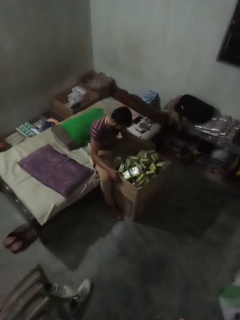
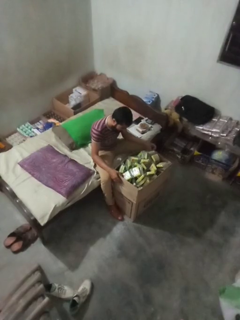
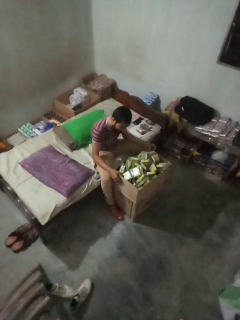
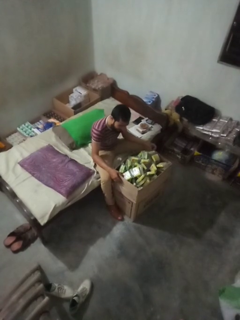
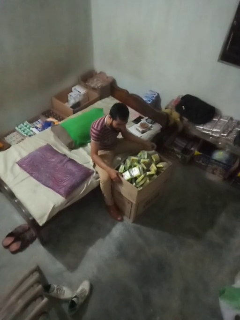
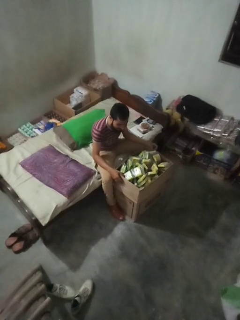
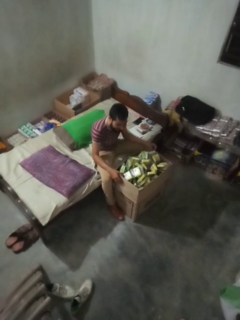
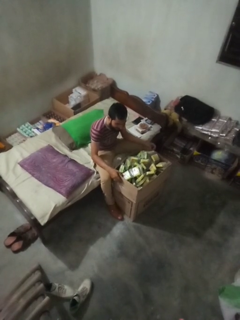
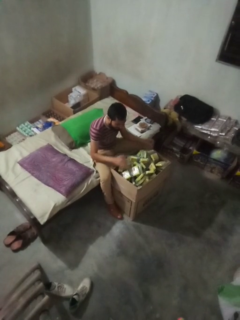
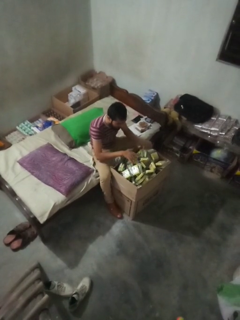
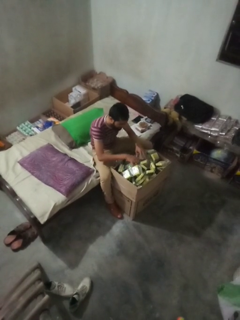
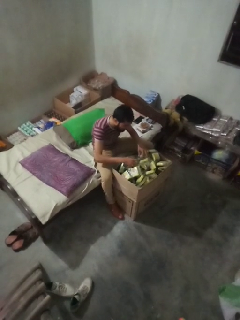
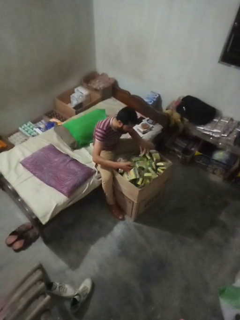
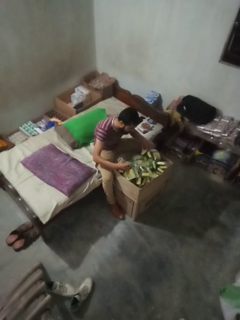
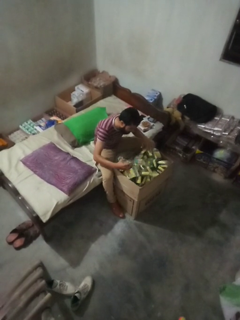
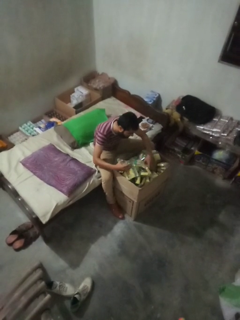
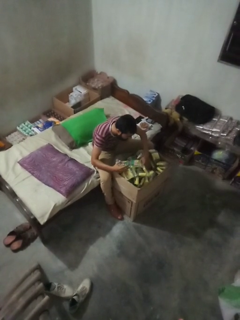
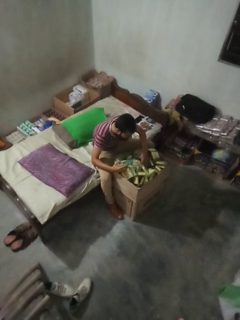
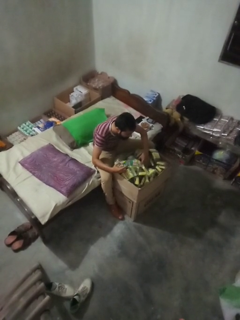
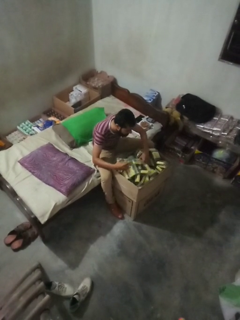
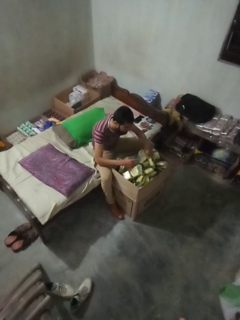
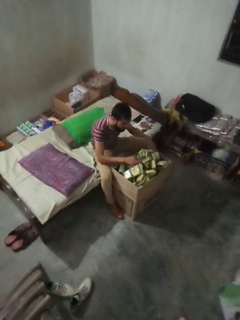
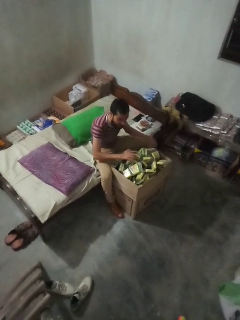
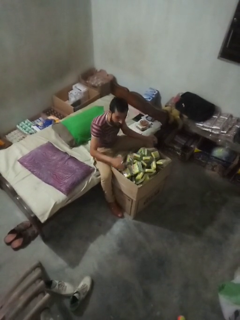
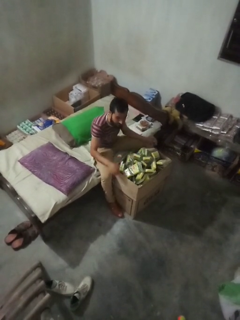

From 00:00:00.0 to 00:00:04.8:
person searches in box

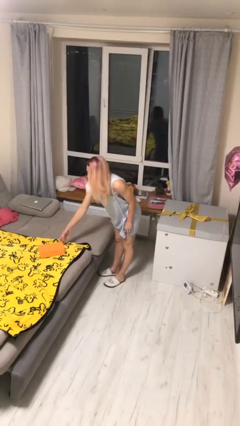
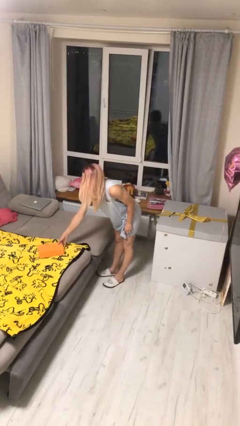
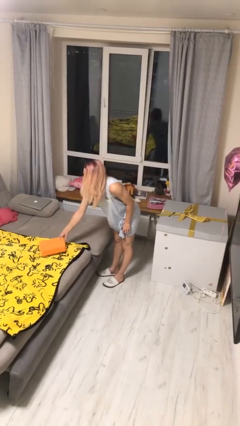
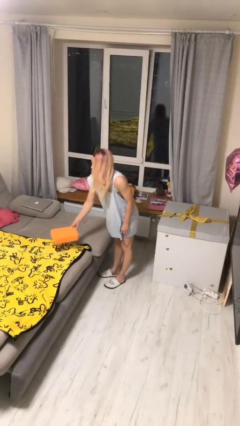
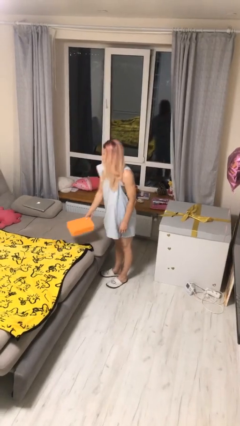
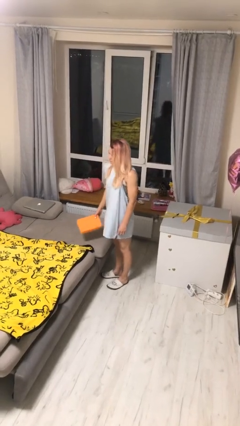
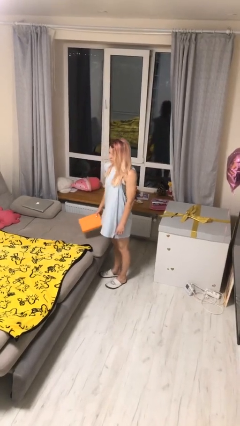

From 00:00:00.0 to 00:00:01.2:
person picks up object from bed

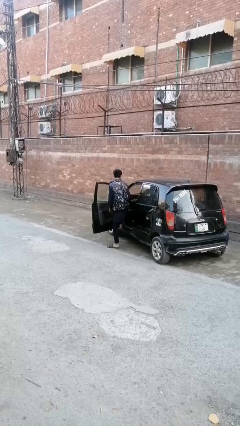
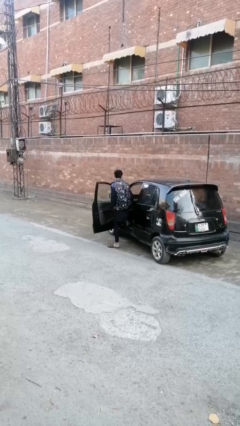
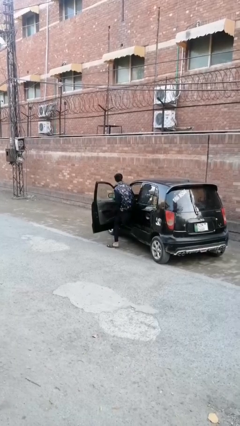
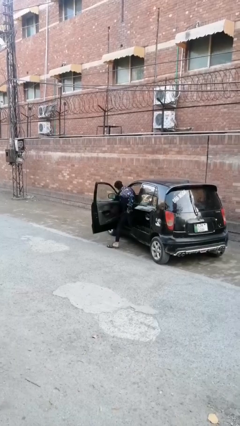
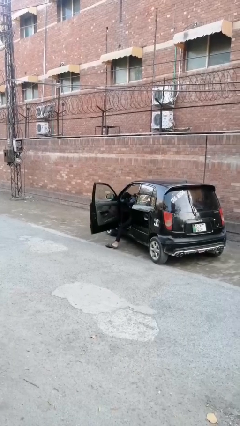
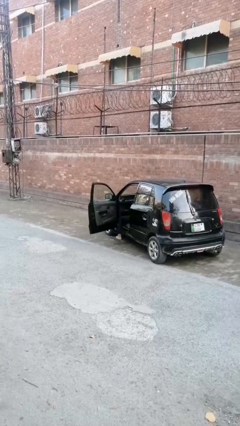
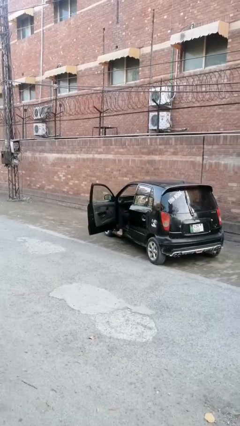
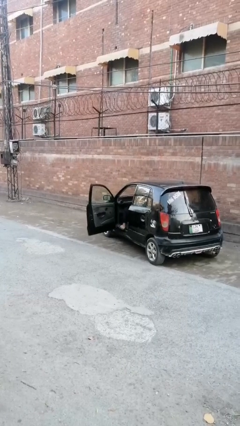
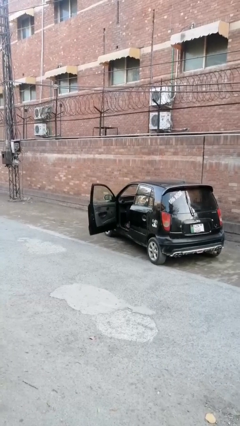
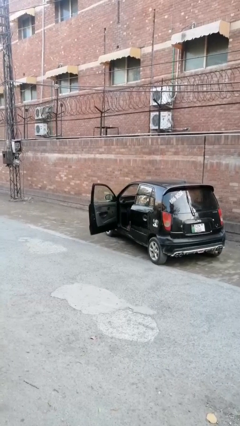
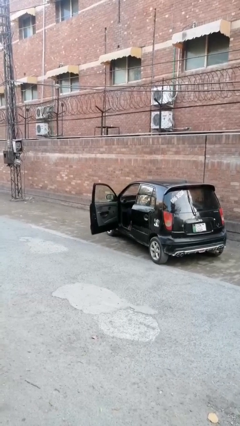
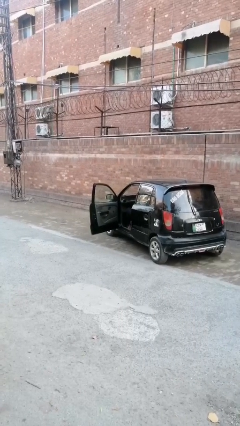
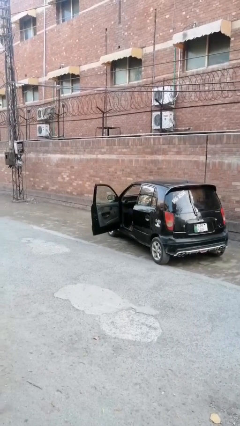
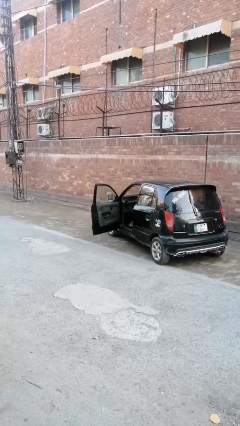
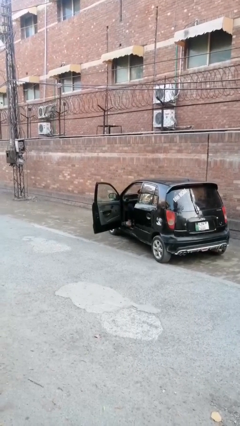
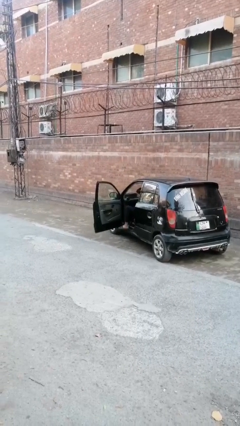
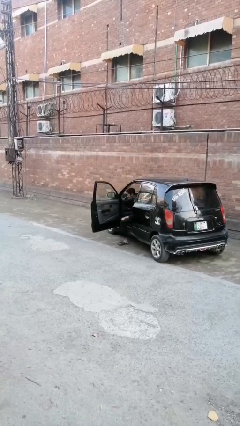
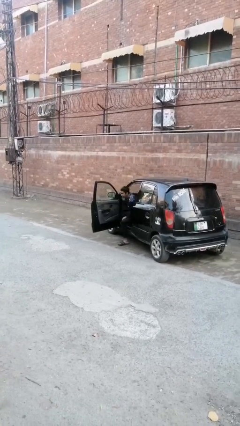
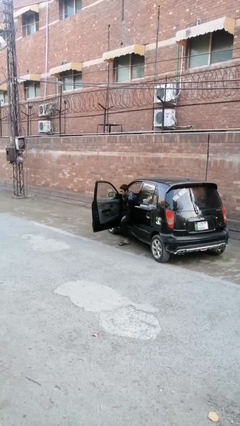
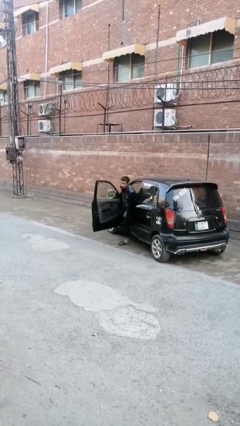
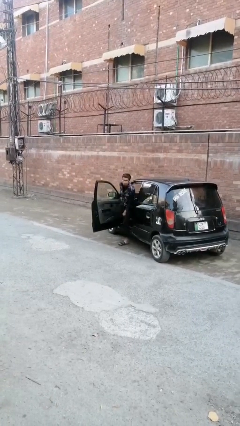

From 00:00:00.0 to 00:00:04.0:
person enters car

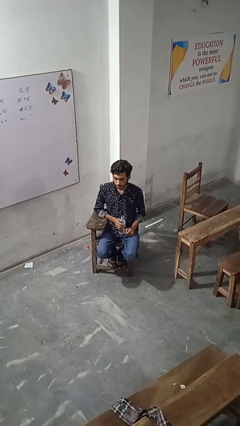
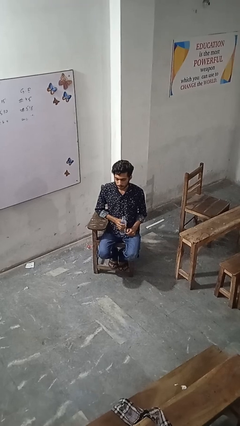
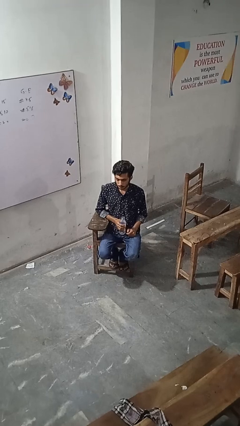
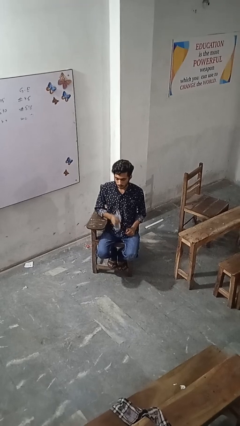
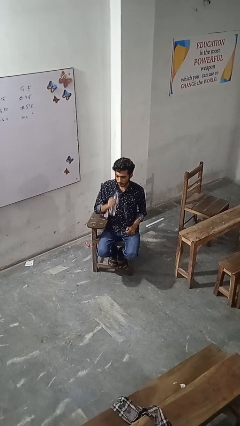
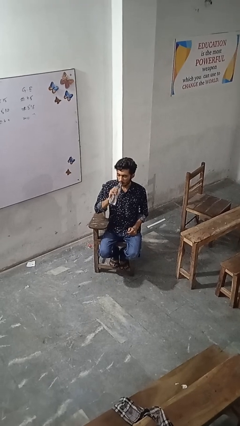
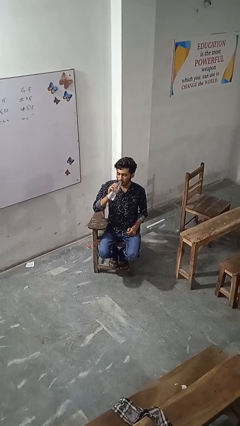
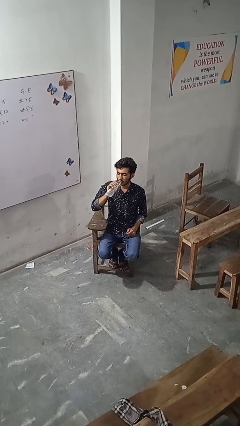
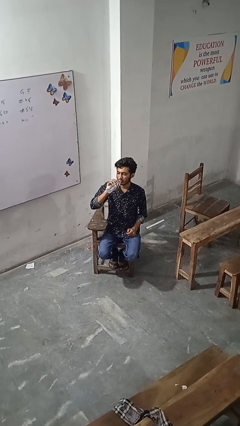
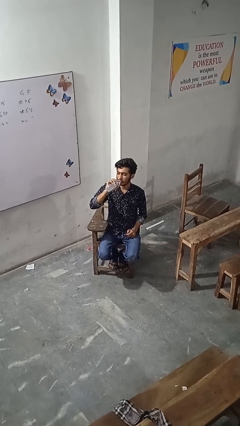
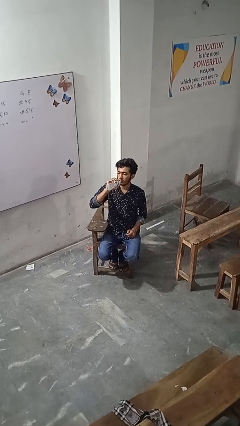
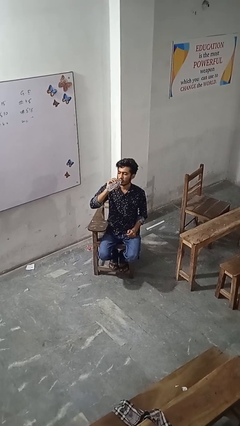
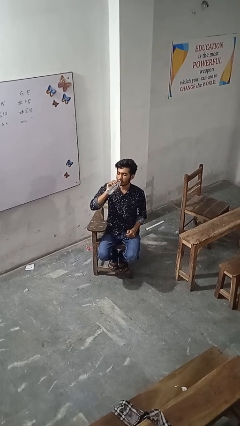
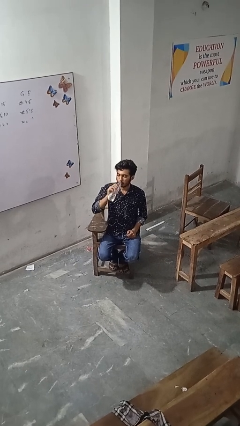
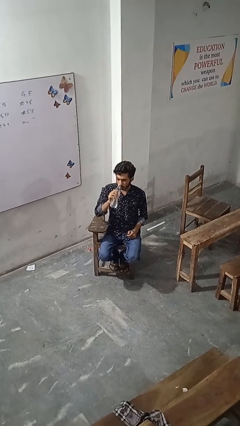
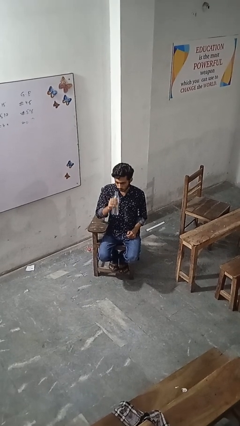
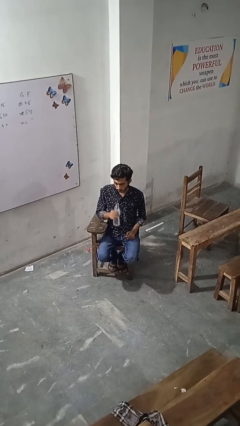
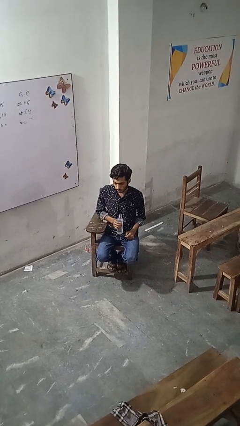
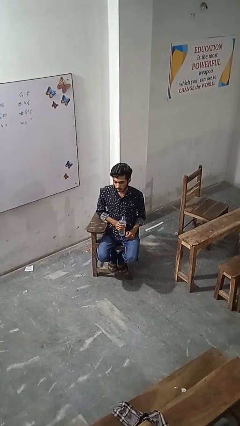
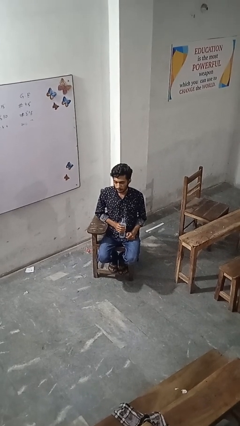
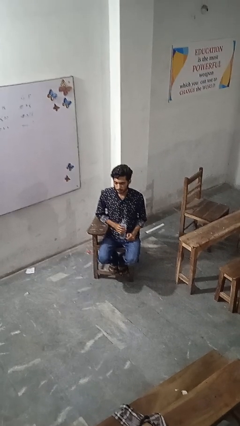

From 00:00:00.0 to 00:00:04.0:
person drinks from bottle

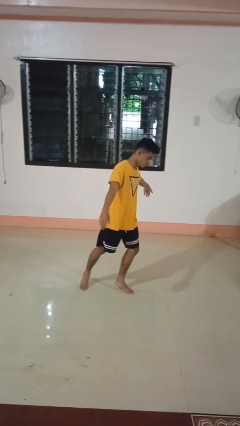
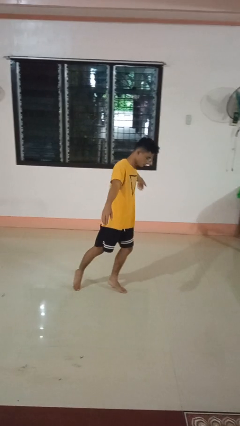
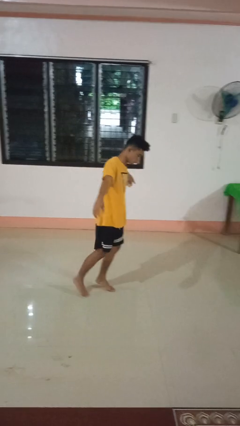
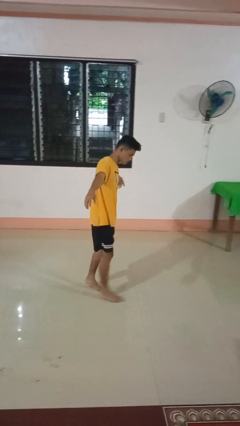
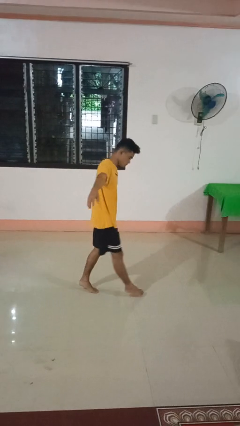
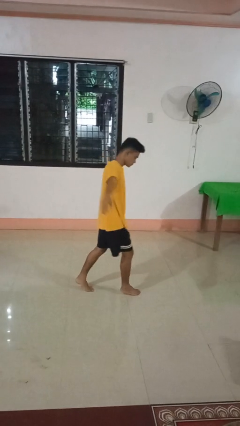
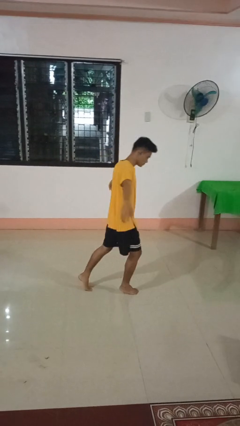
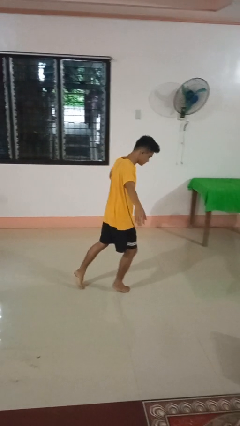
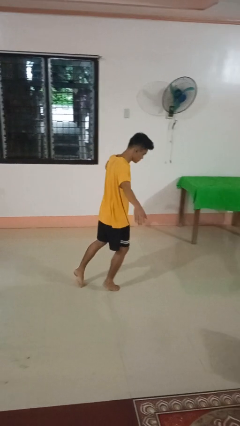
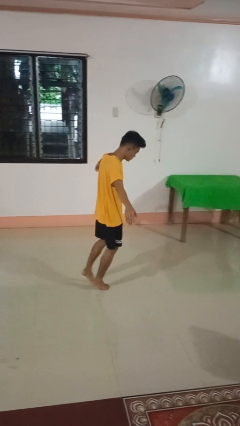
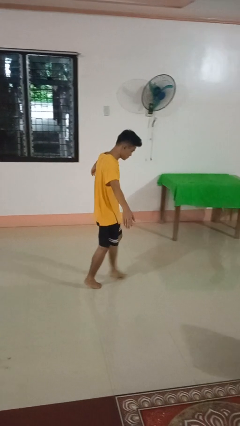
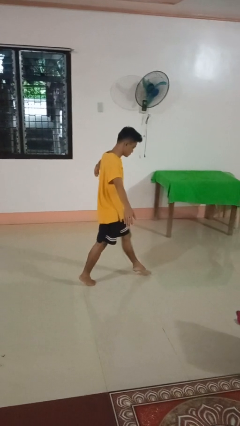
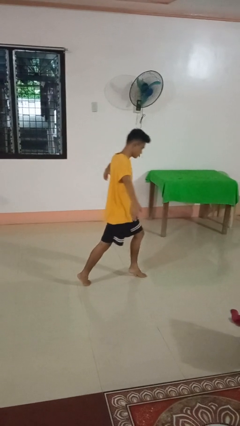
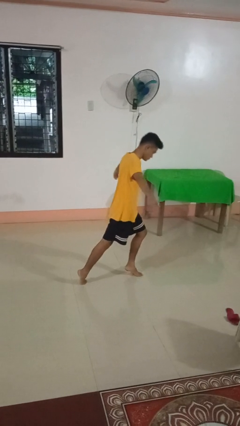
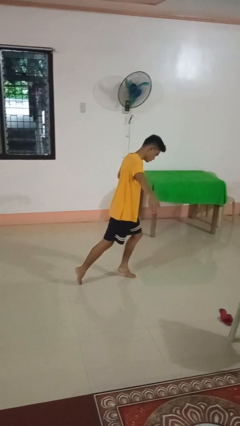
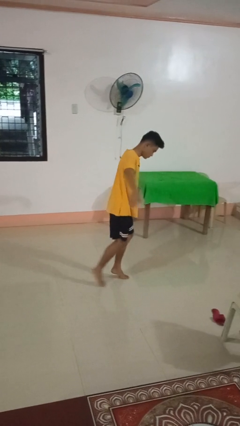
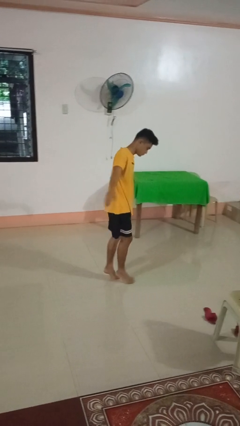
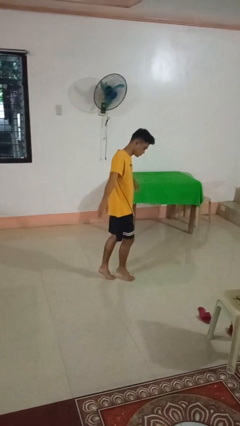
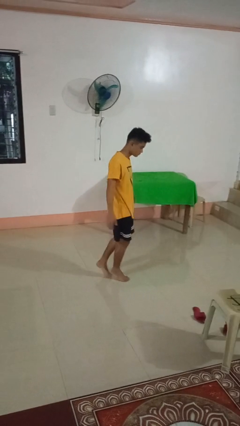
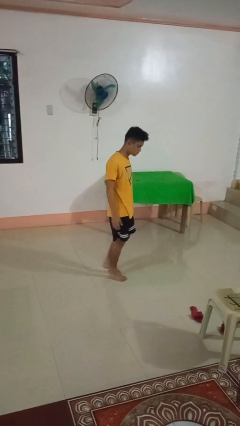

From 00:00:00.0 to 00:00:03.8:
person walks tiptoe

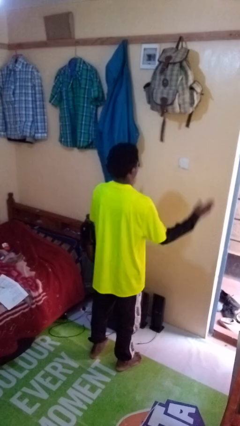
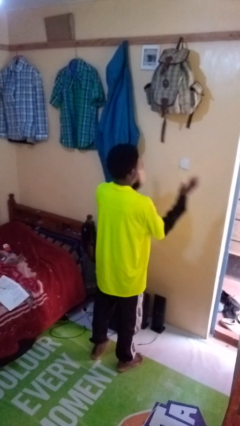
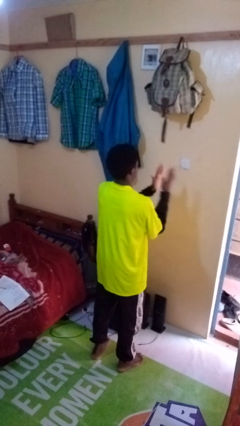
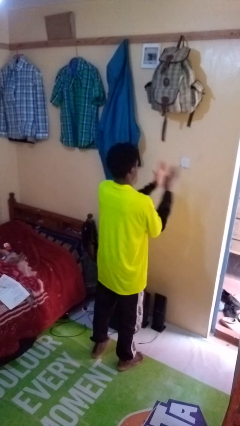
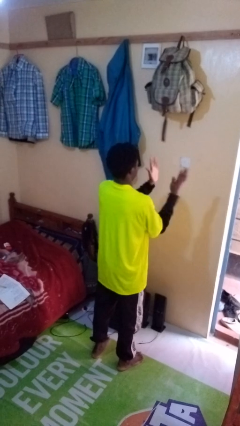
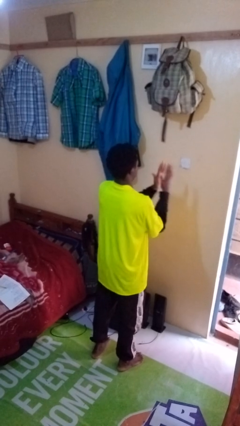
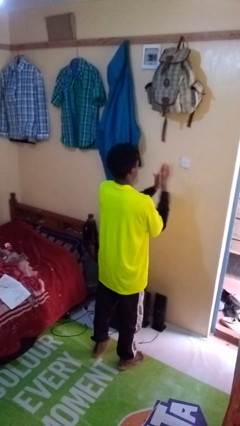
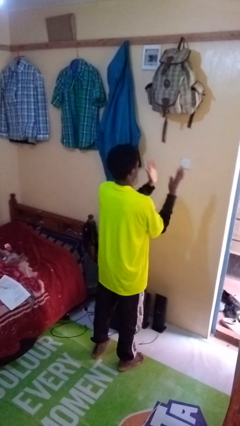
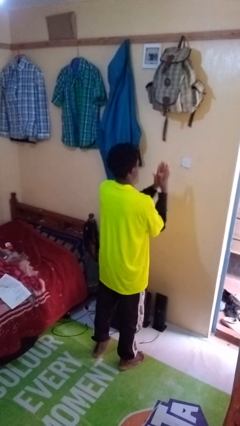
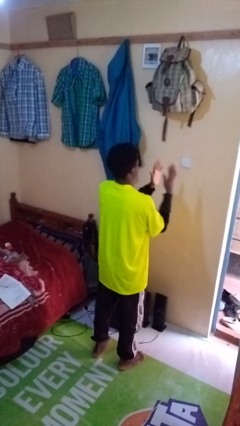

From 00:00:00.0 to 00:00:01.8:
person claps hands
